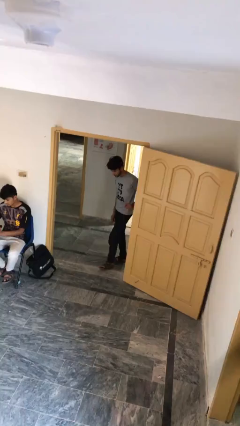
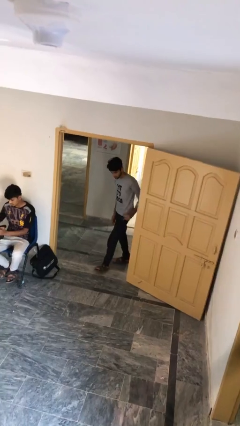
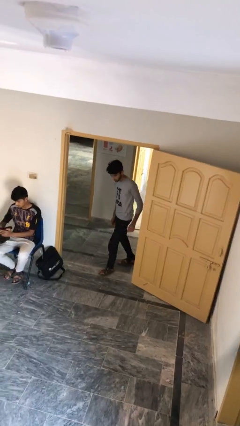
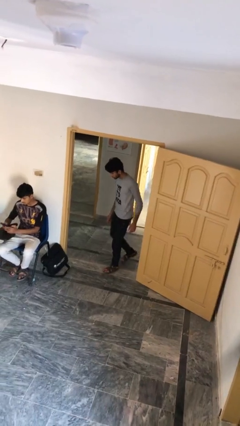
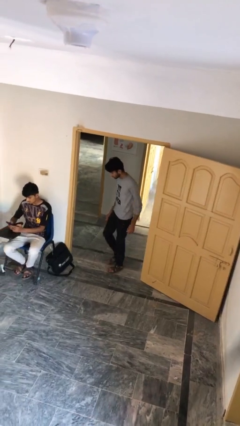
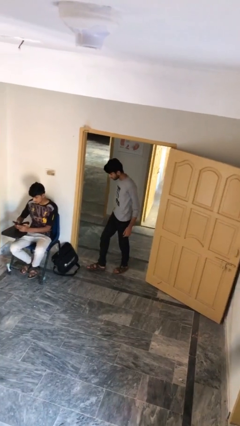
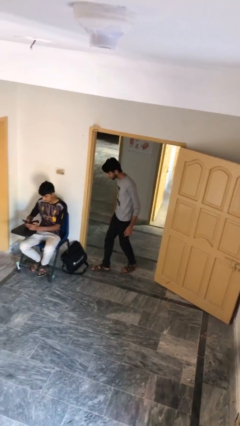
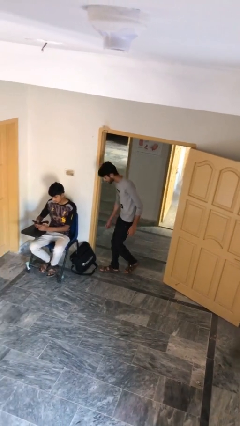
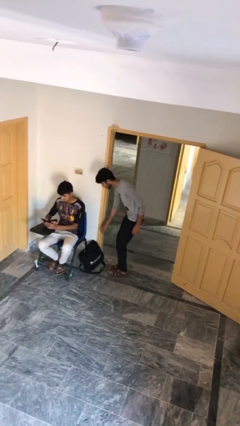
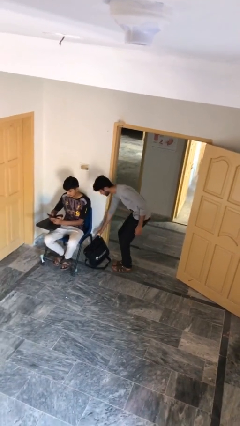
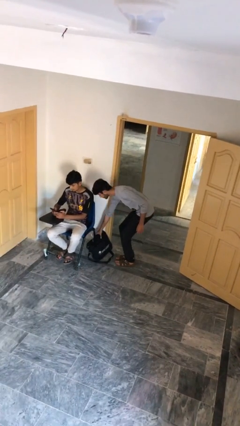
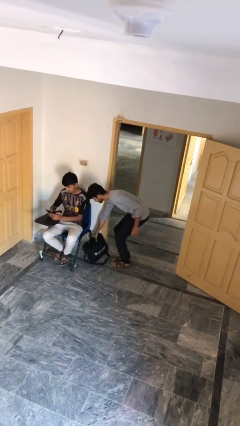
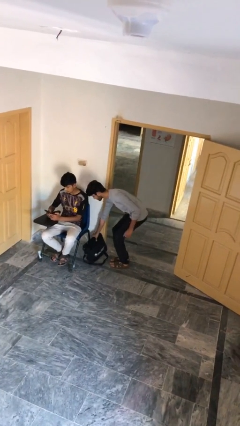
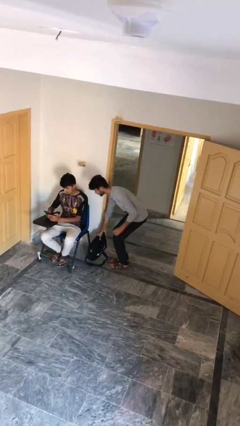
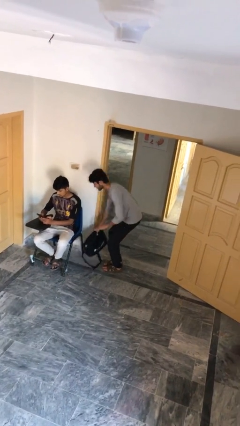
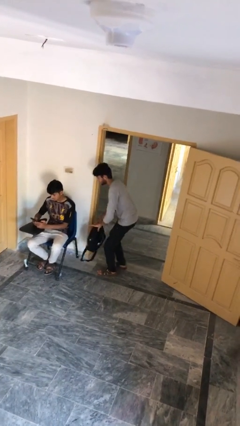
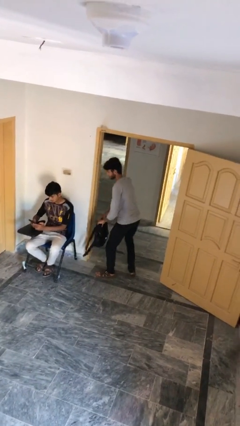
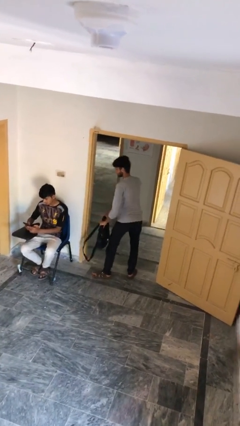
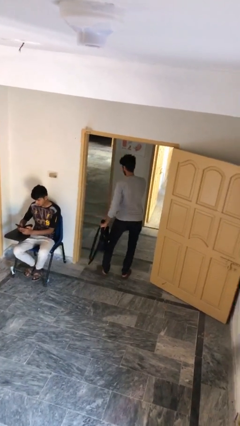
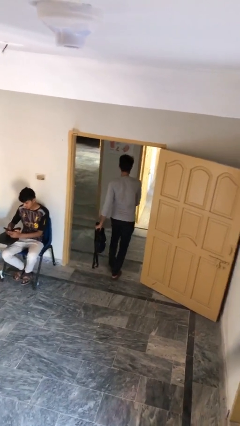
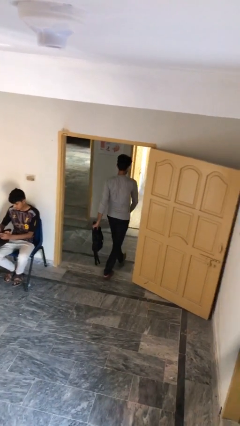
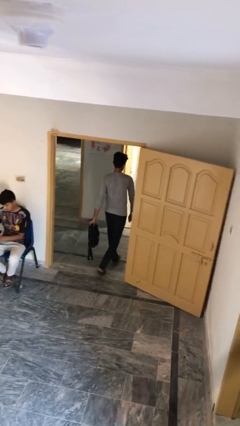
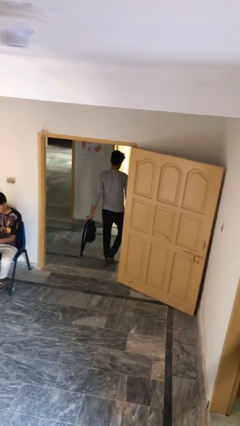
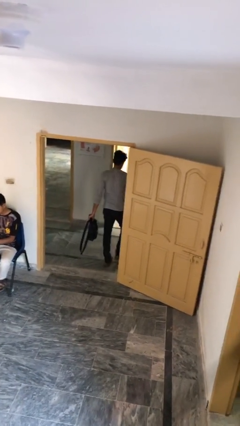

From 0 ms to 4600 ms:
person steals object from person

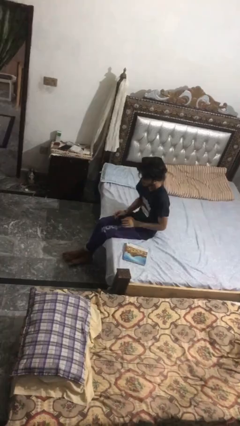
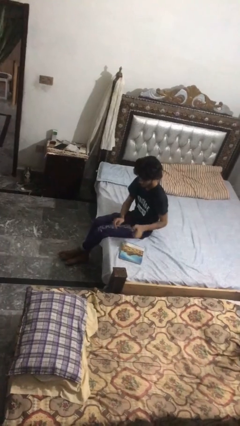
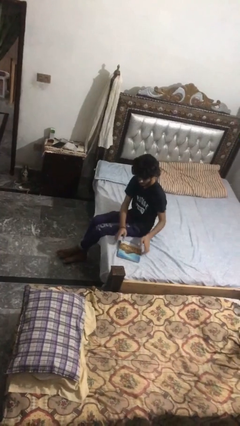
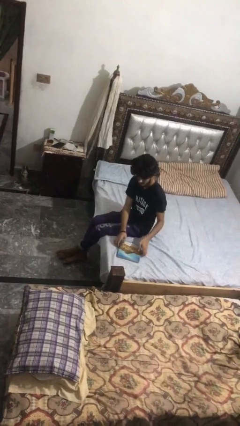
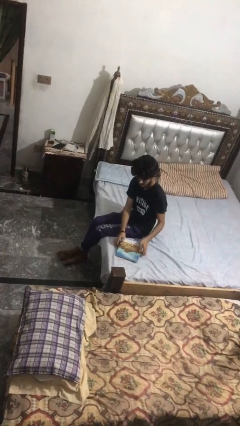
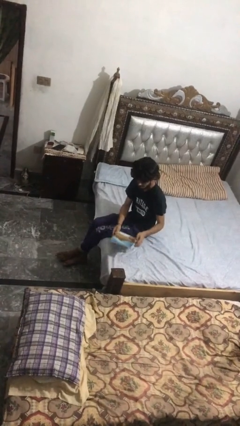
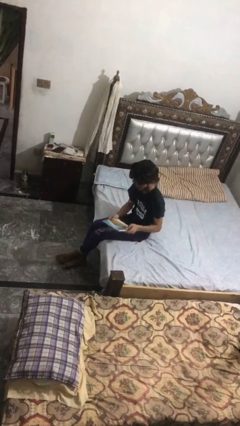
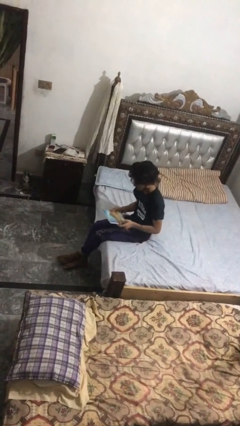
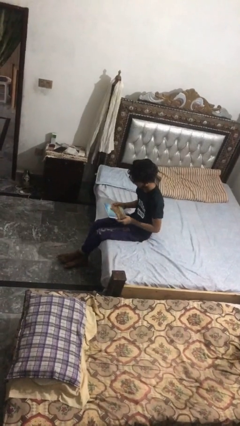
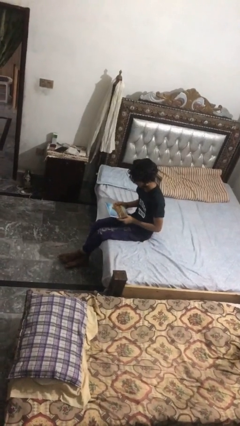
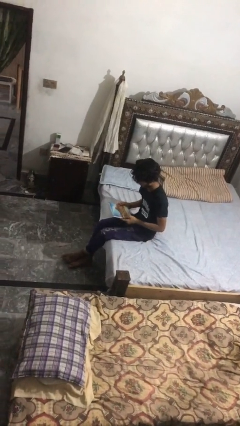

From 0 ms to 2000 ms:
person picks up object from bed

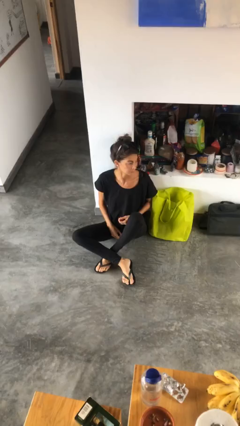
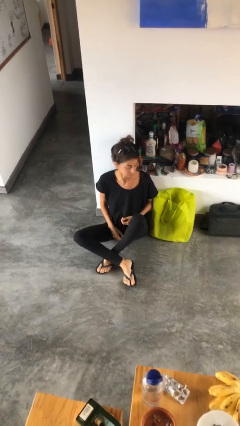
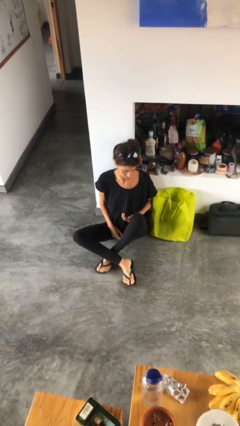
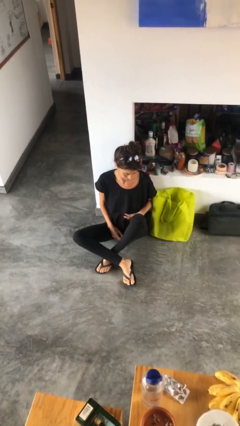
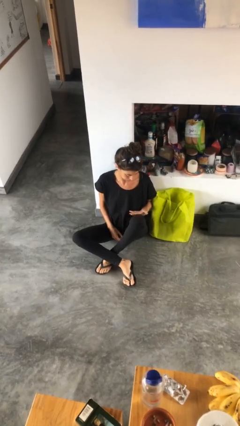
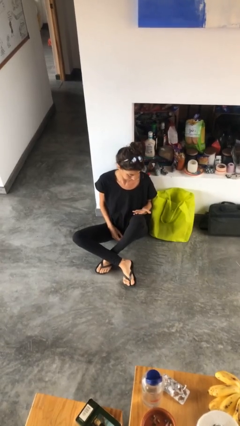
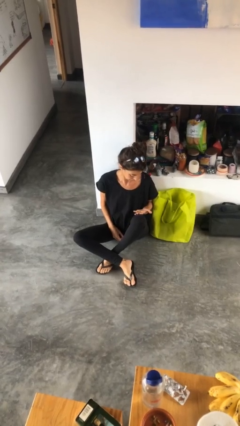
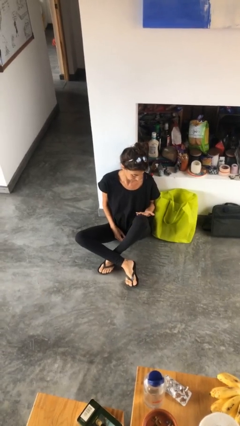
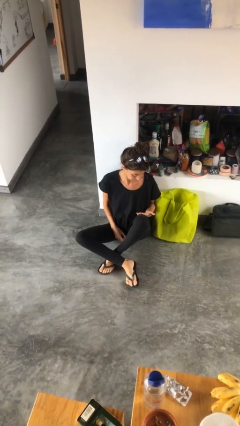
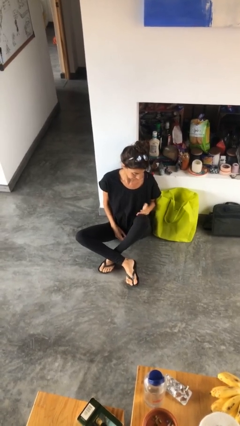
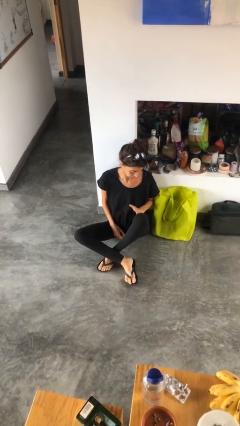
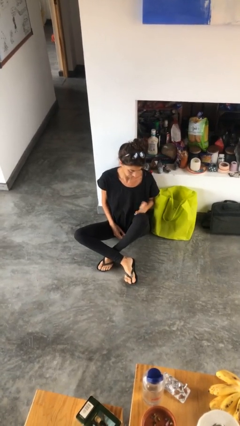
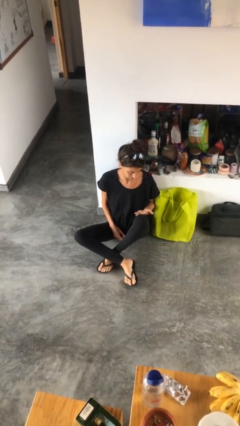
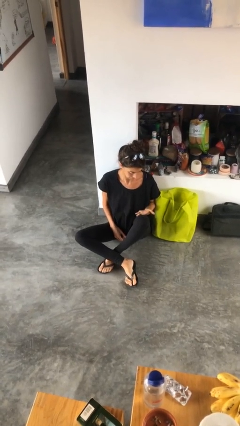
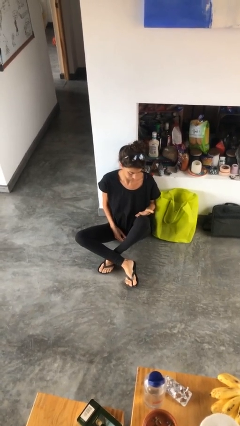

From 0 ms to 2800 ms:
person looks at hands in lap

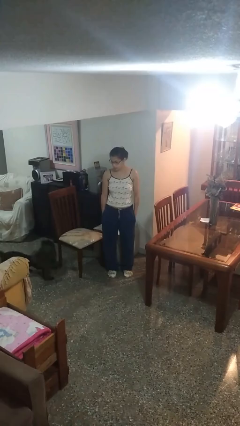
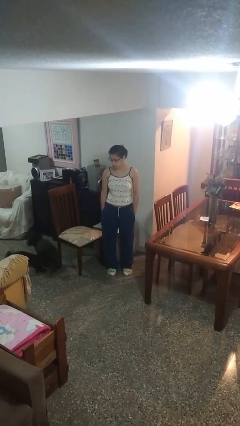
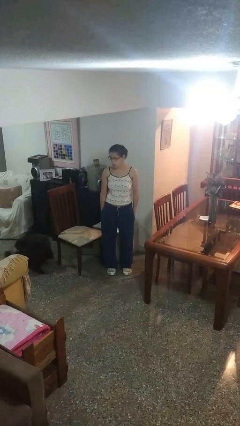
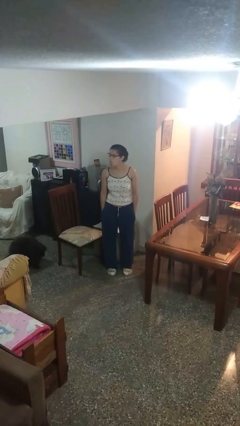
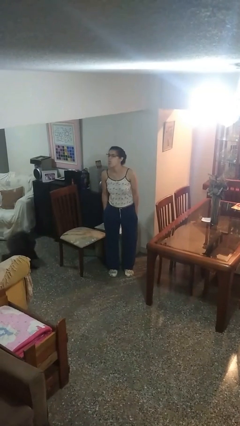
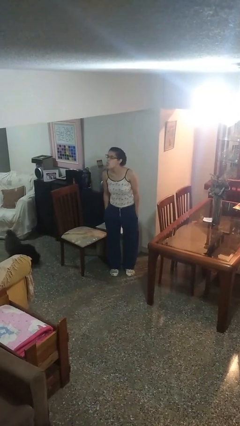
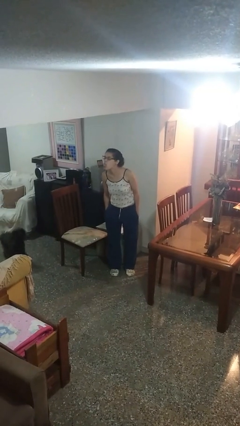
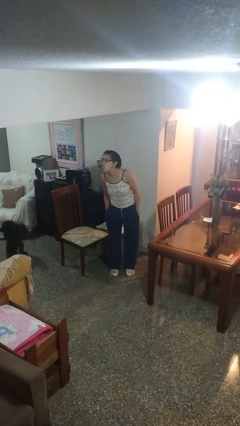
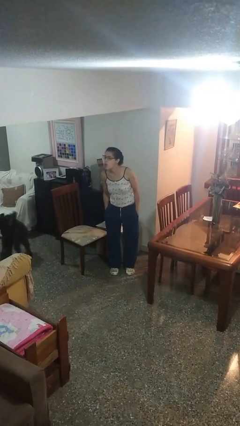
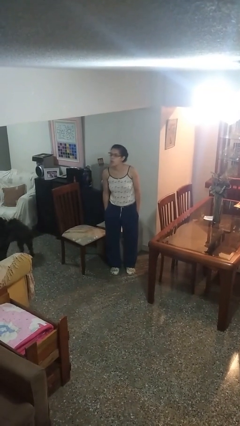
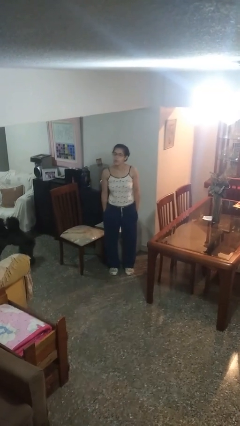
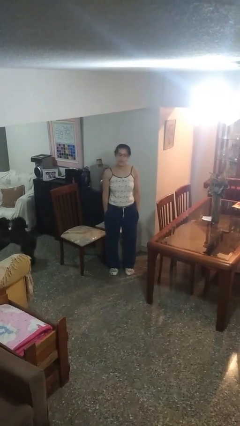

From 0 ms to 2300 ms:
person sticks out tongue

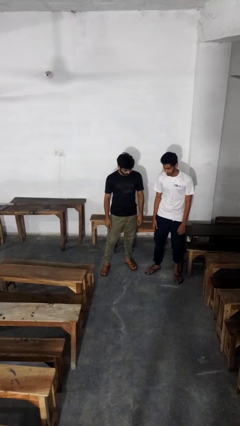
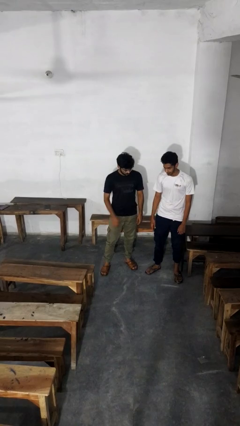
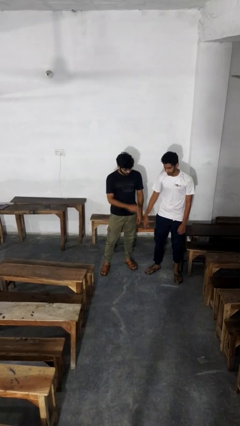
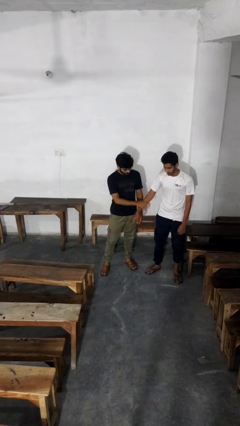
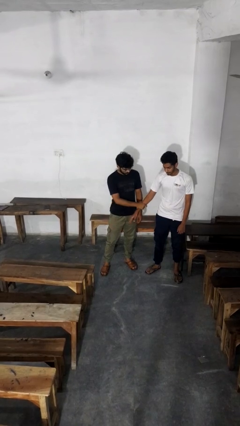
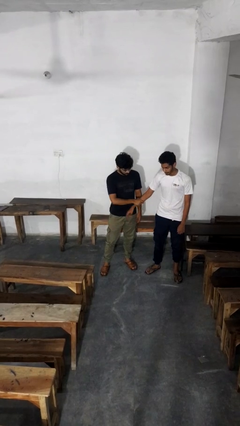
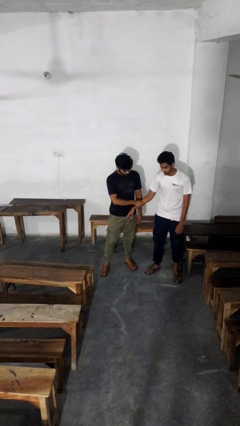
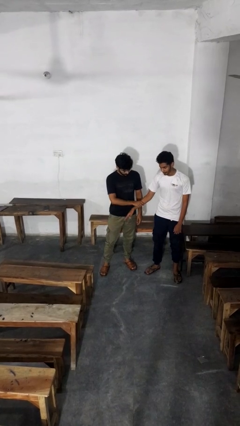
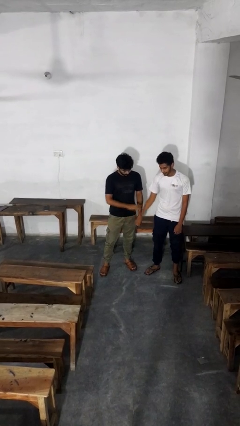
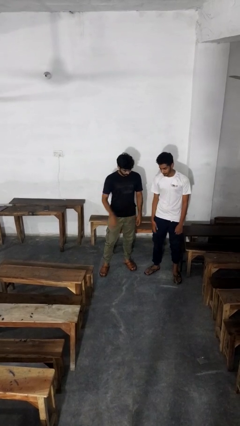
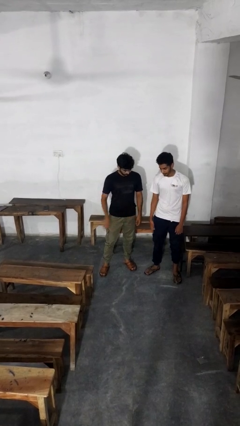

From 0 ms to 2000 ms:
person grabs person by forearm

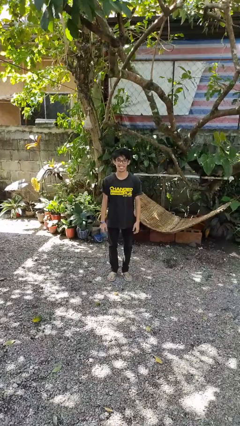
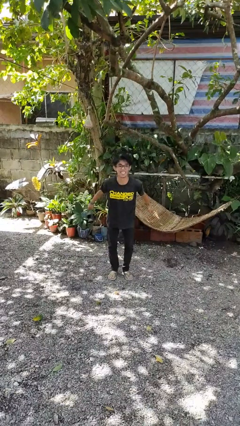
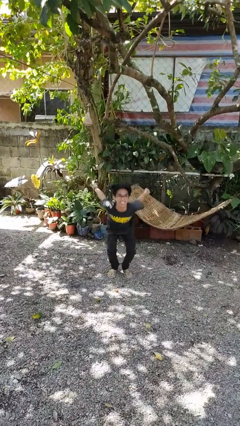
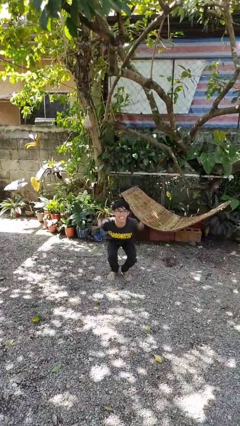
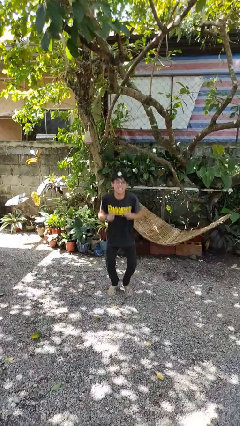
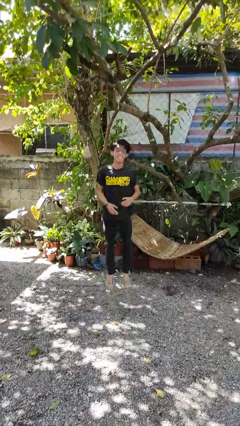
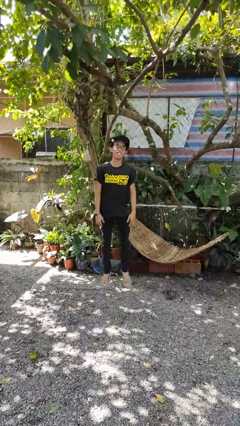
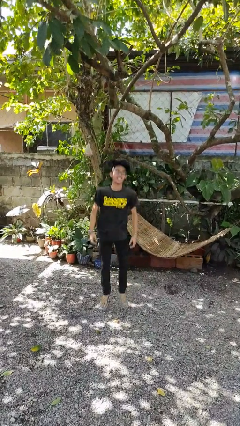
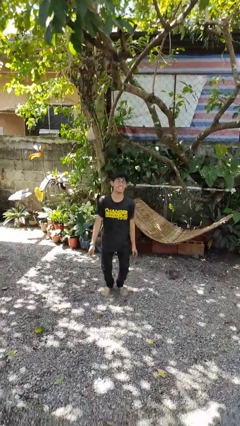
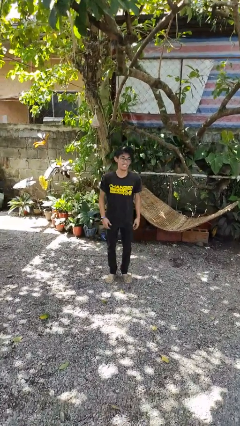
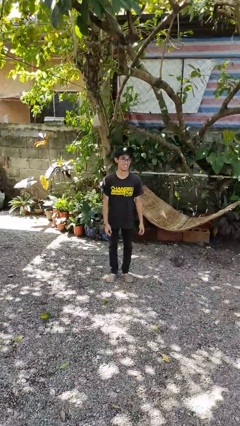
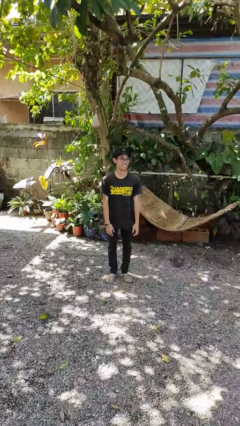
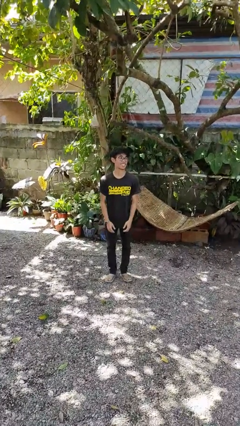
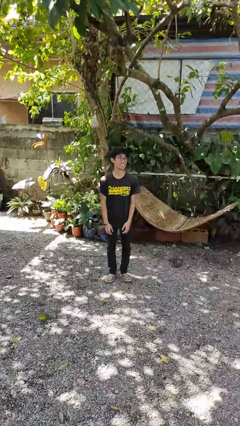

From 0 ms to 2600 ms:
person jumps

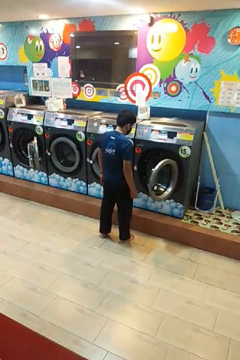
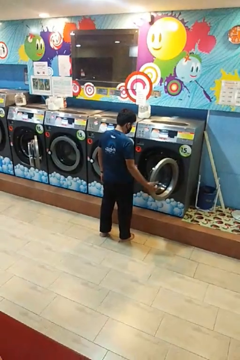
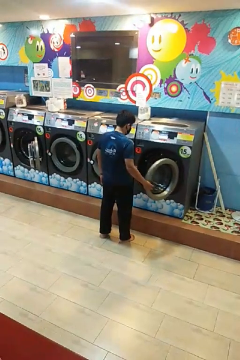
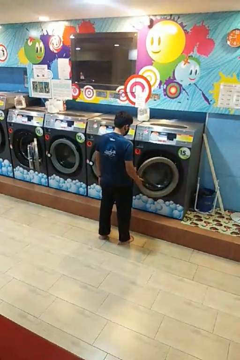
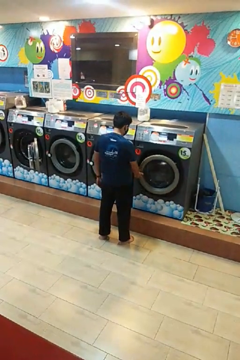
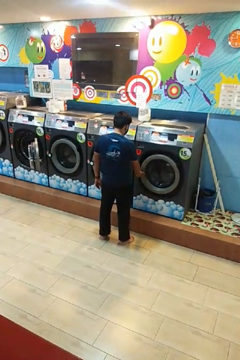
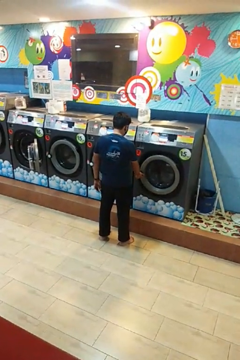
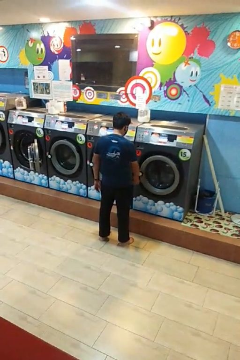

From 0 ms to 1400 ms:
person closes clothes washer
